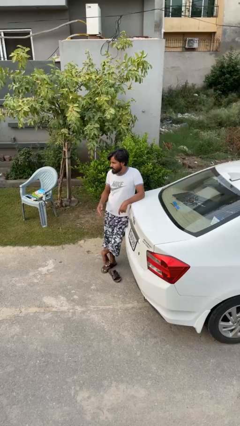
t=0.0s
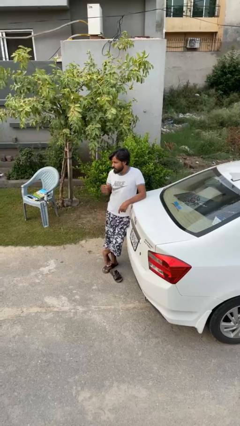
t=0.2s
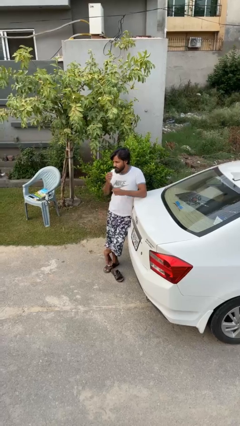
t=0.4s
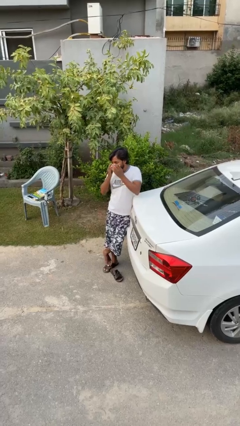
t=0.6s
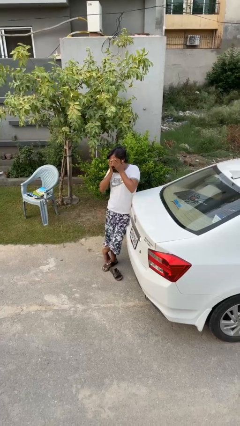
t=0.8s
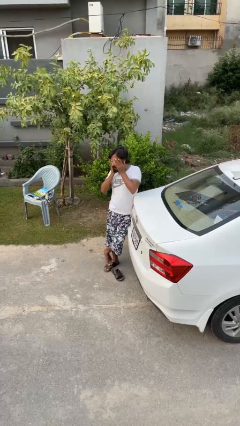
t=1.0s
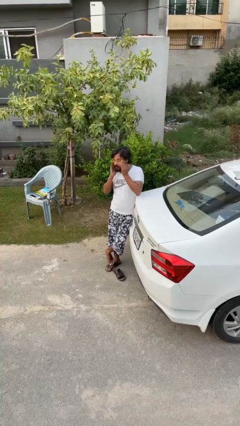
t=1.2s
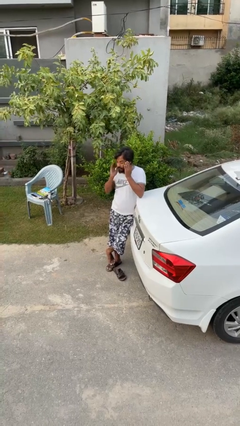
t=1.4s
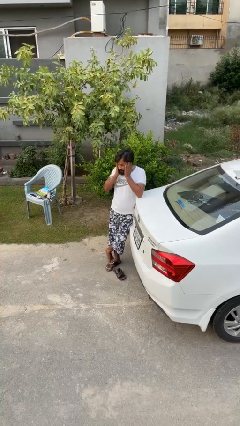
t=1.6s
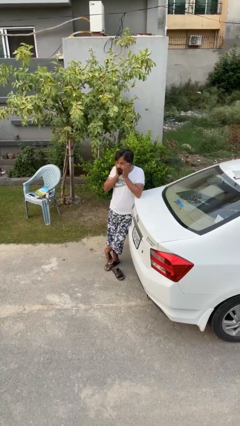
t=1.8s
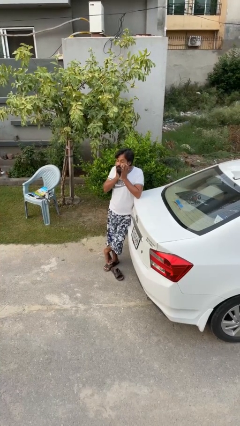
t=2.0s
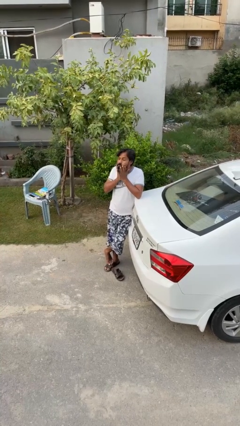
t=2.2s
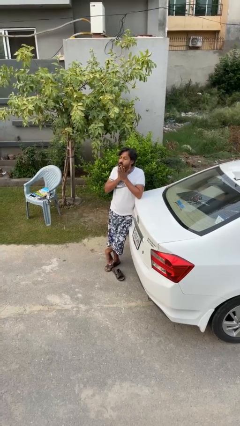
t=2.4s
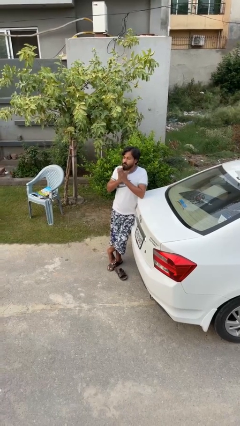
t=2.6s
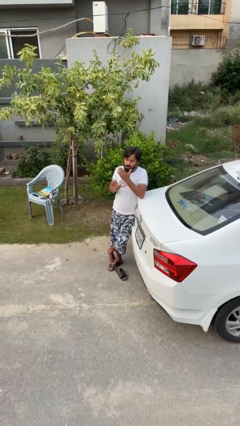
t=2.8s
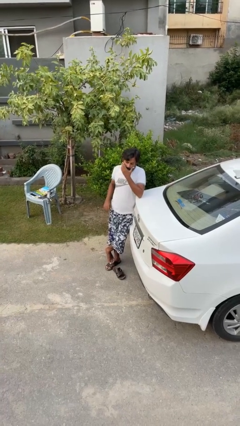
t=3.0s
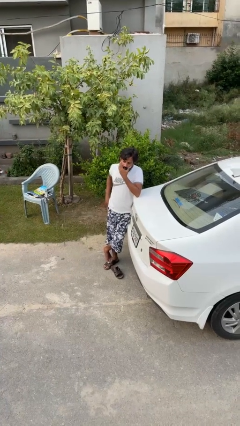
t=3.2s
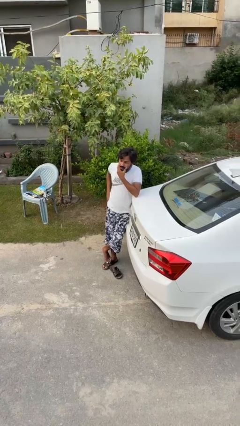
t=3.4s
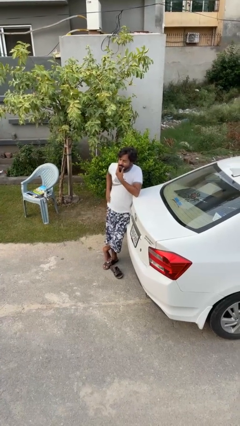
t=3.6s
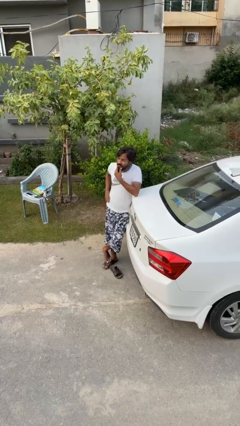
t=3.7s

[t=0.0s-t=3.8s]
person scratches face

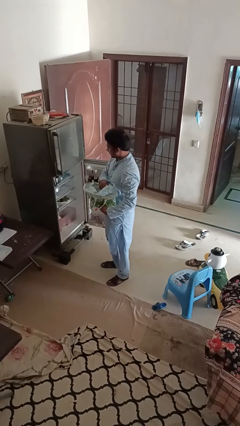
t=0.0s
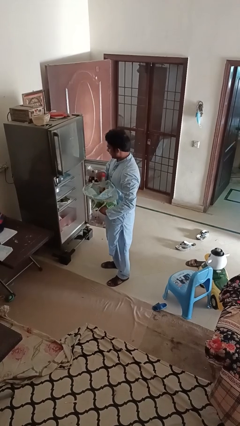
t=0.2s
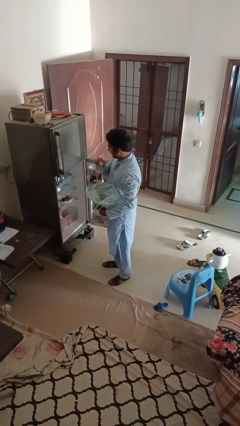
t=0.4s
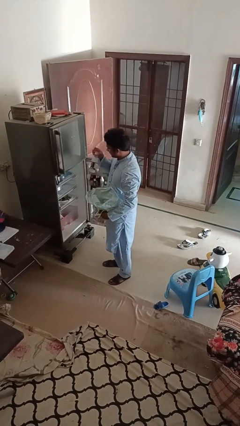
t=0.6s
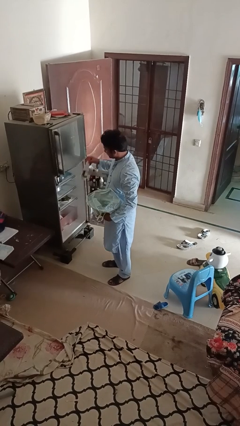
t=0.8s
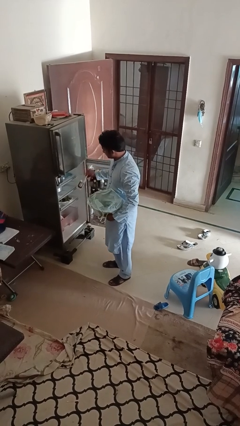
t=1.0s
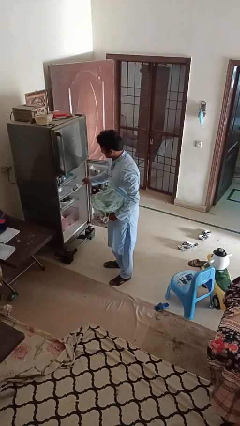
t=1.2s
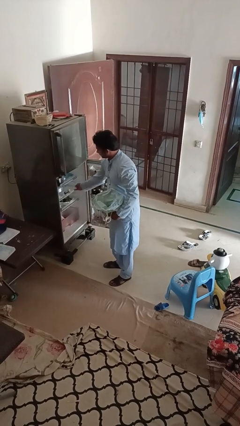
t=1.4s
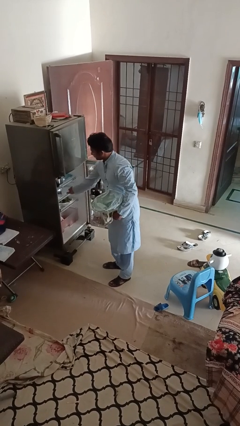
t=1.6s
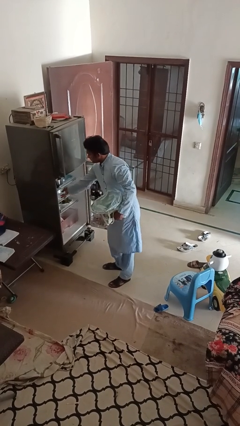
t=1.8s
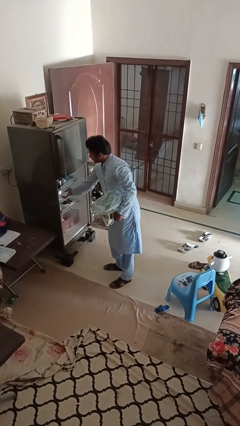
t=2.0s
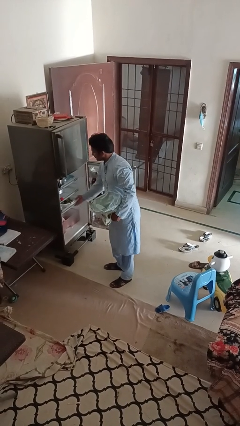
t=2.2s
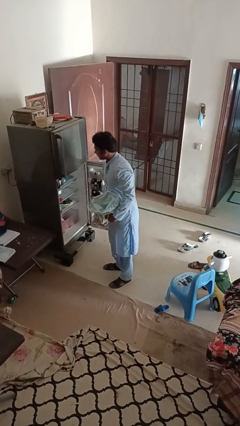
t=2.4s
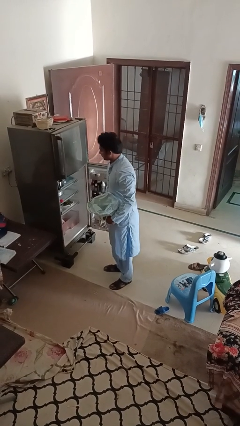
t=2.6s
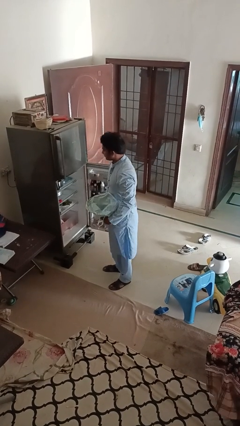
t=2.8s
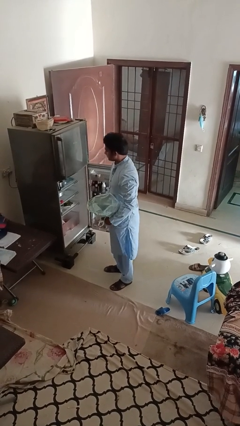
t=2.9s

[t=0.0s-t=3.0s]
person loads groceries into refrigerator

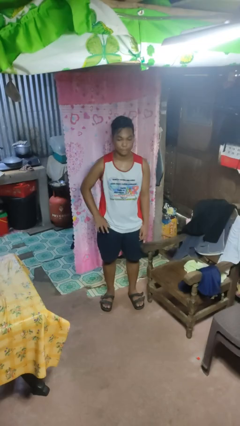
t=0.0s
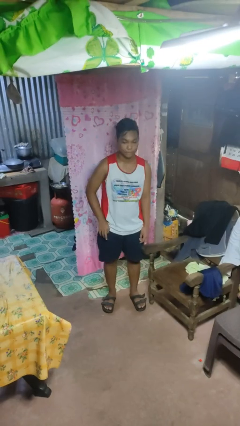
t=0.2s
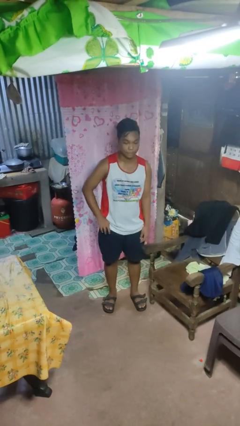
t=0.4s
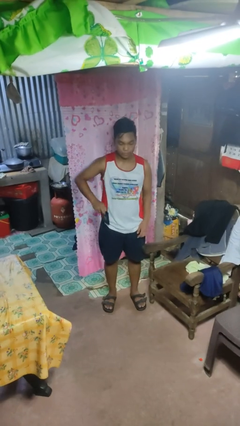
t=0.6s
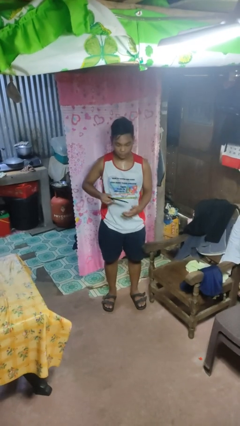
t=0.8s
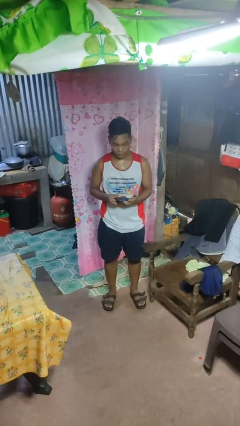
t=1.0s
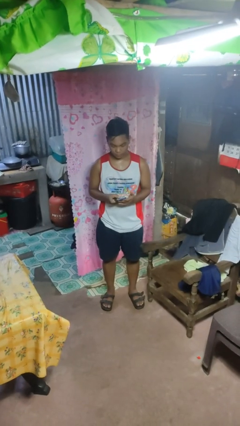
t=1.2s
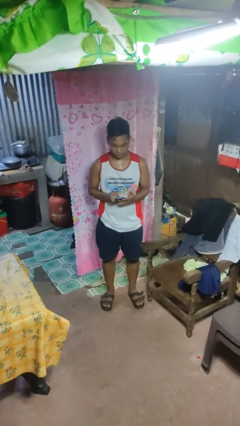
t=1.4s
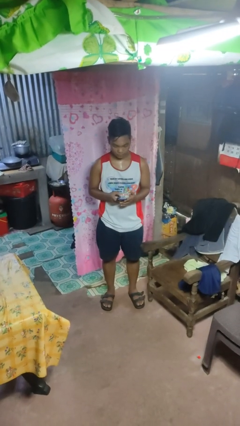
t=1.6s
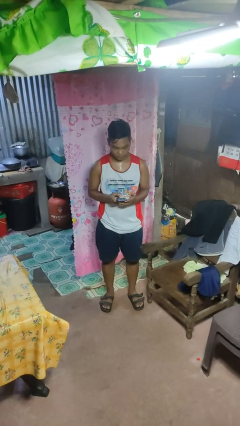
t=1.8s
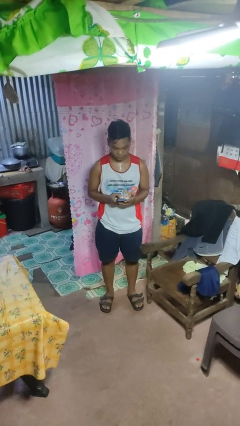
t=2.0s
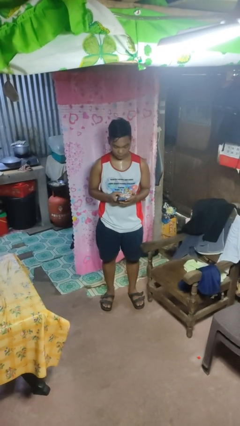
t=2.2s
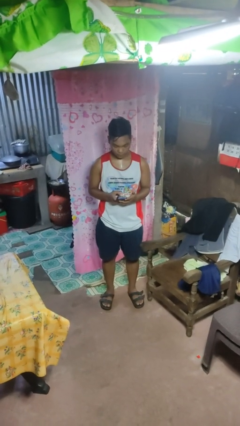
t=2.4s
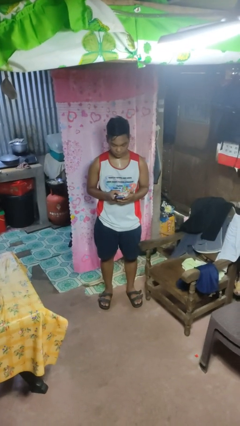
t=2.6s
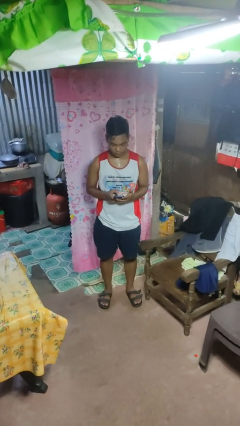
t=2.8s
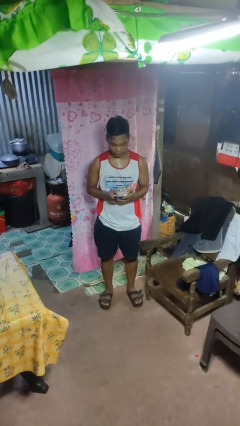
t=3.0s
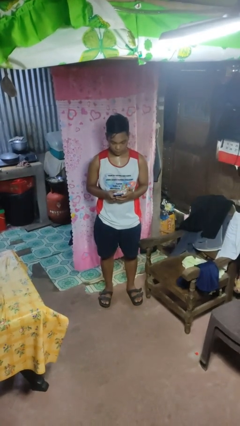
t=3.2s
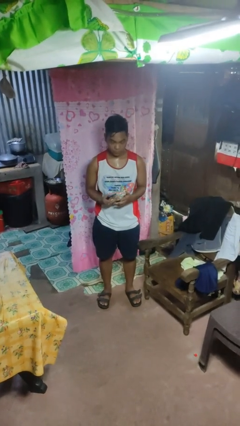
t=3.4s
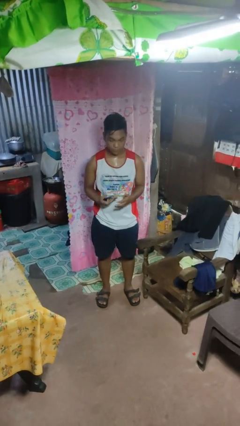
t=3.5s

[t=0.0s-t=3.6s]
person takes phone from pocket

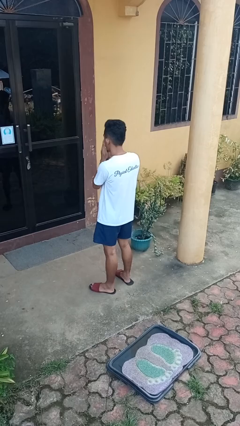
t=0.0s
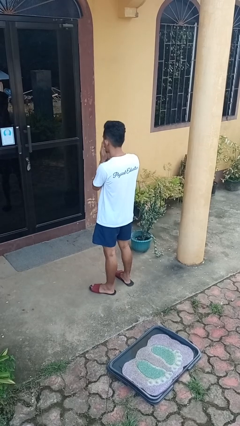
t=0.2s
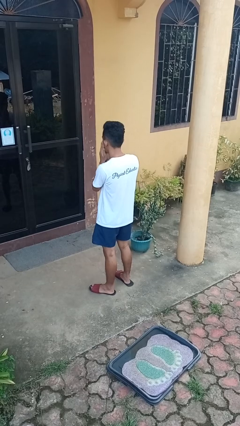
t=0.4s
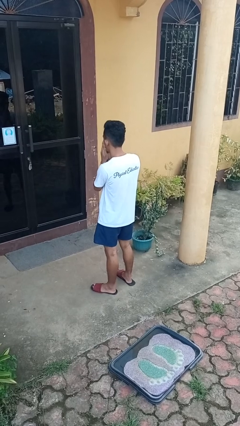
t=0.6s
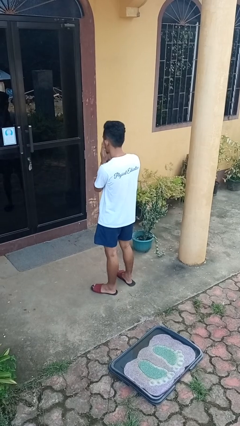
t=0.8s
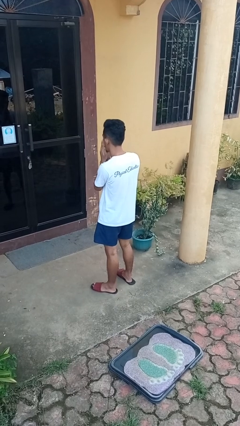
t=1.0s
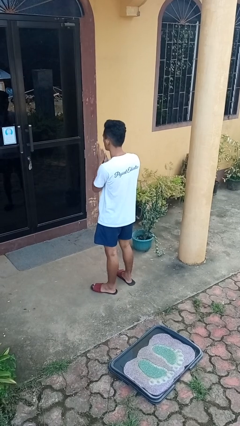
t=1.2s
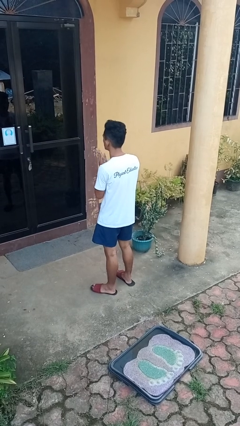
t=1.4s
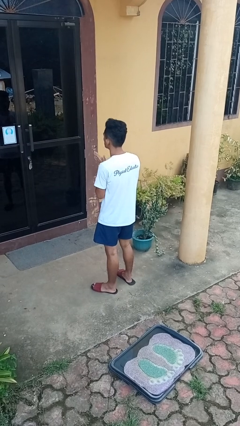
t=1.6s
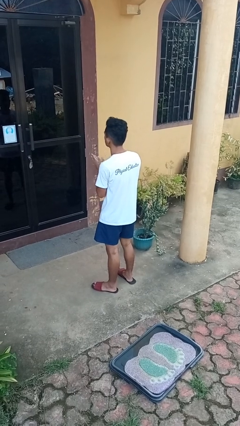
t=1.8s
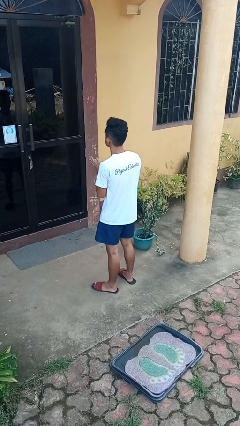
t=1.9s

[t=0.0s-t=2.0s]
person blows into hands

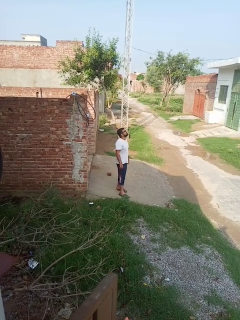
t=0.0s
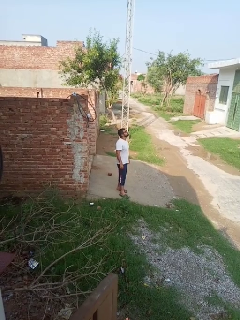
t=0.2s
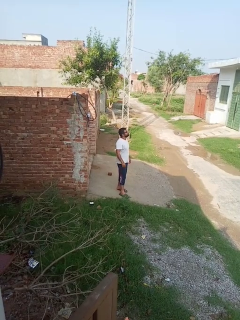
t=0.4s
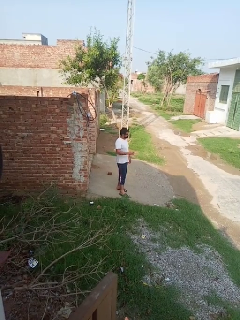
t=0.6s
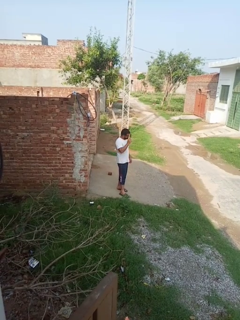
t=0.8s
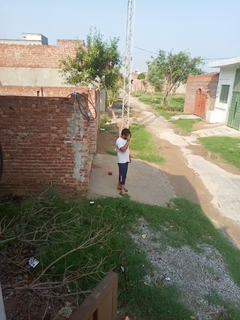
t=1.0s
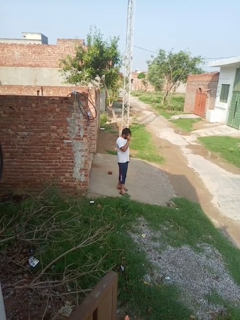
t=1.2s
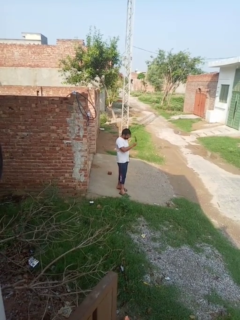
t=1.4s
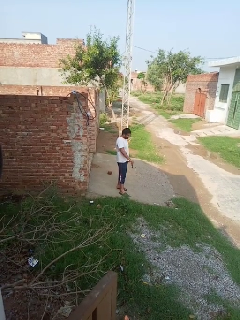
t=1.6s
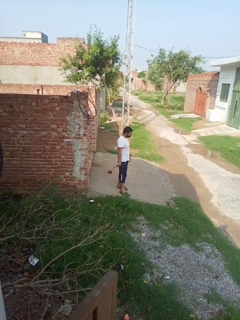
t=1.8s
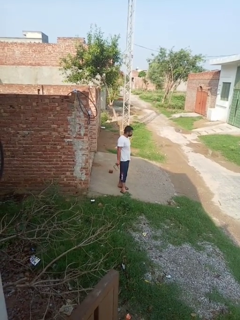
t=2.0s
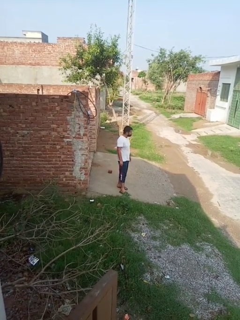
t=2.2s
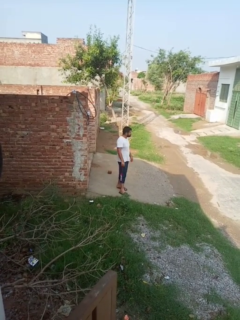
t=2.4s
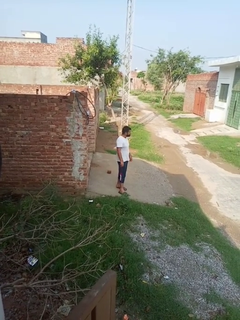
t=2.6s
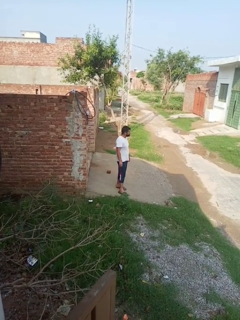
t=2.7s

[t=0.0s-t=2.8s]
person takes off glasses

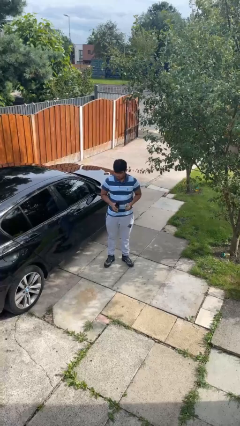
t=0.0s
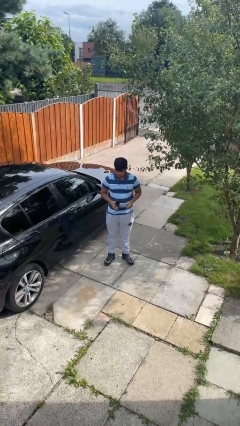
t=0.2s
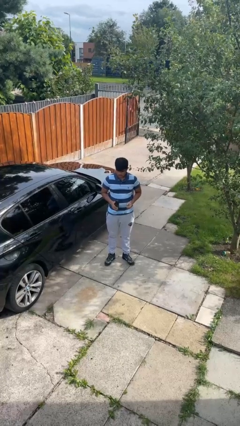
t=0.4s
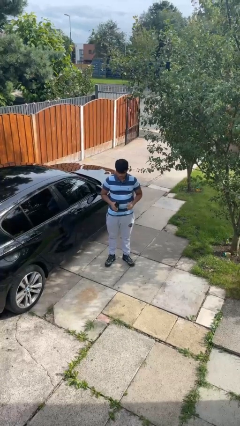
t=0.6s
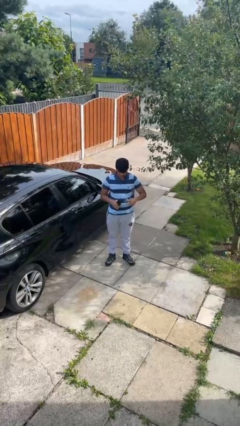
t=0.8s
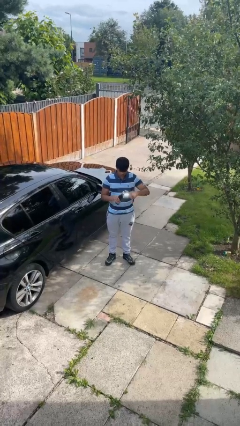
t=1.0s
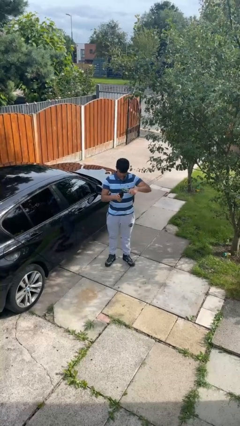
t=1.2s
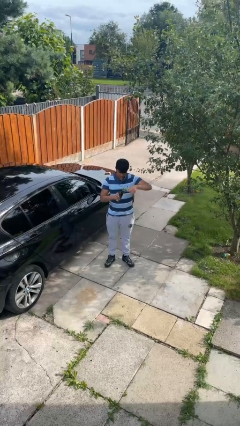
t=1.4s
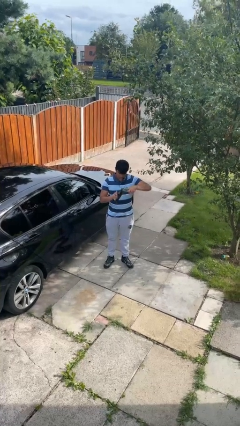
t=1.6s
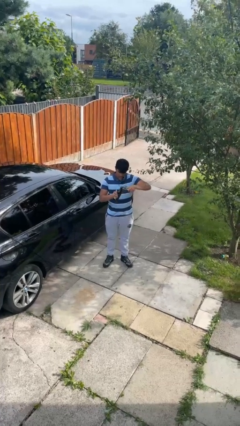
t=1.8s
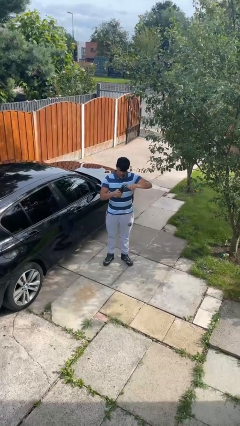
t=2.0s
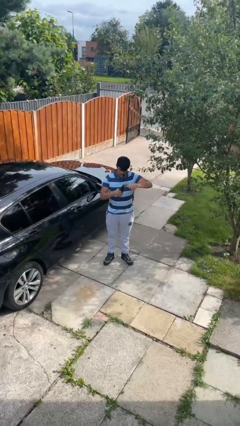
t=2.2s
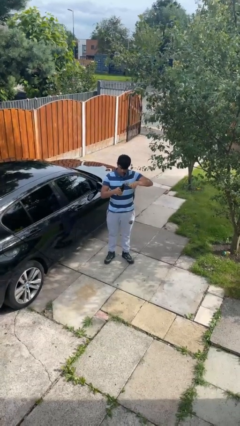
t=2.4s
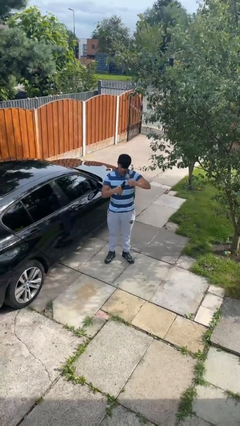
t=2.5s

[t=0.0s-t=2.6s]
person opens can with can opener

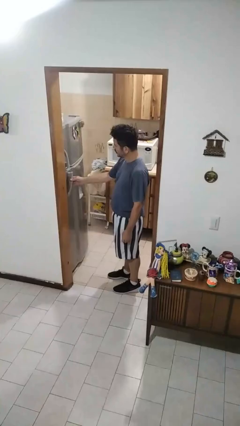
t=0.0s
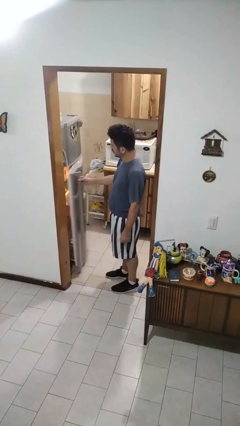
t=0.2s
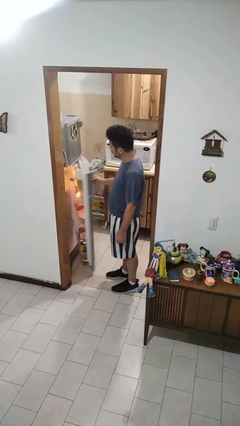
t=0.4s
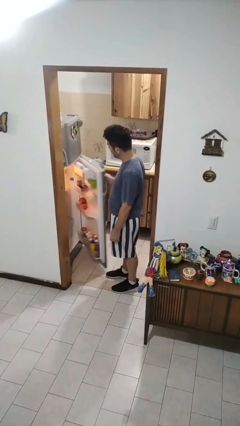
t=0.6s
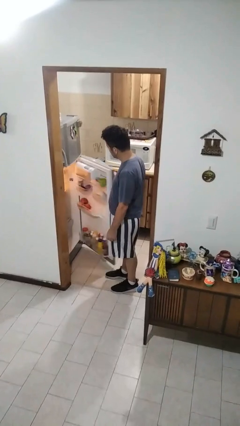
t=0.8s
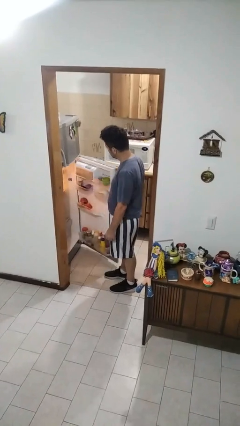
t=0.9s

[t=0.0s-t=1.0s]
person opens refrigerator
